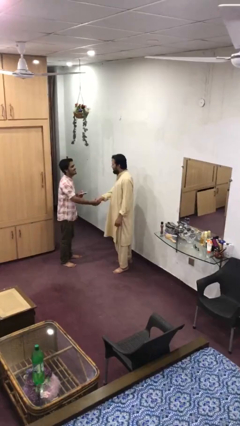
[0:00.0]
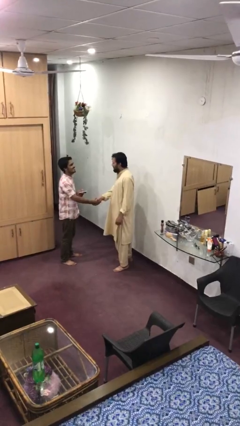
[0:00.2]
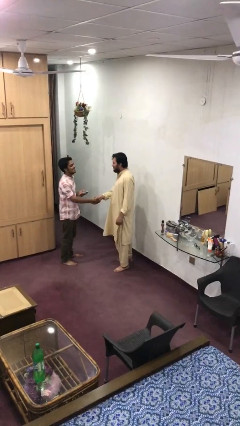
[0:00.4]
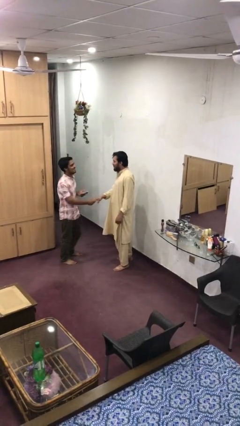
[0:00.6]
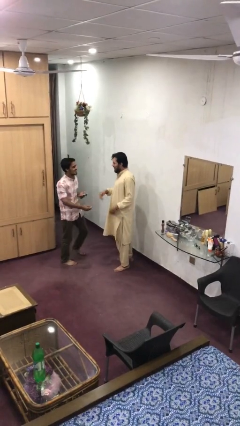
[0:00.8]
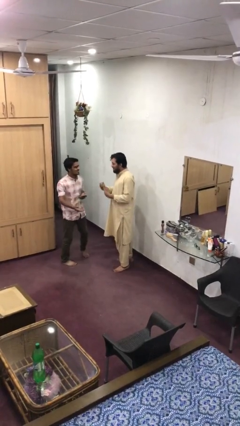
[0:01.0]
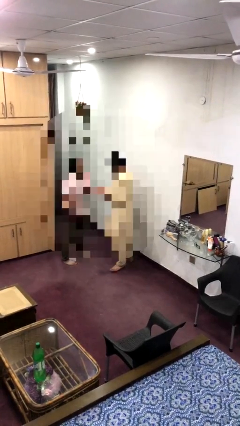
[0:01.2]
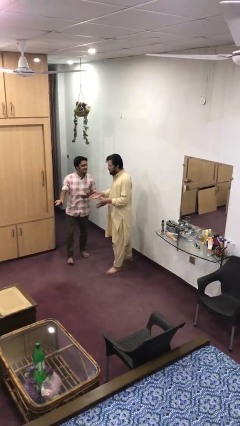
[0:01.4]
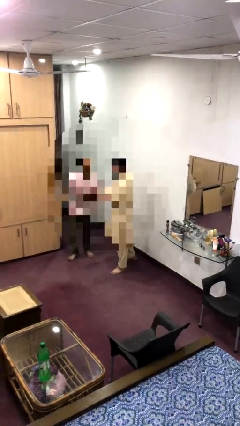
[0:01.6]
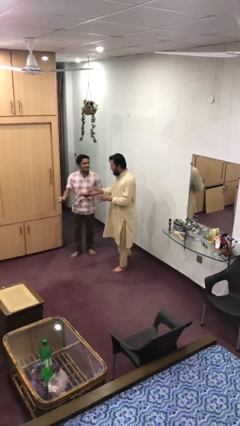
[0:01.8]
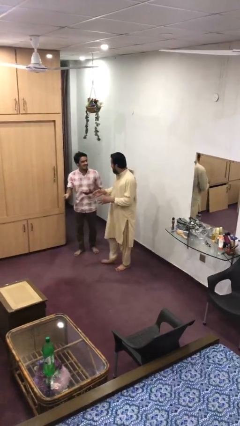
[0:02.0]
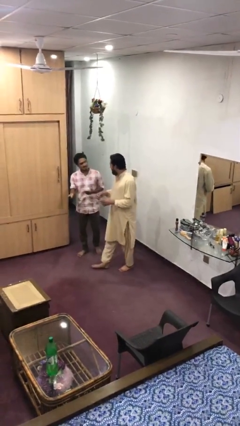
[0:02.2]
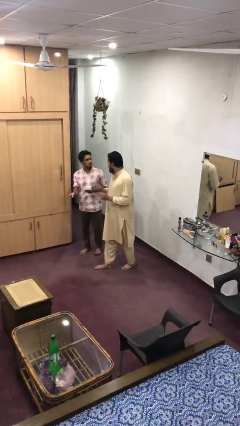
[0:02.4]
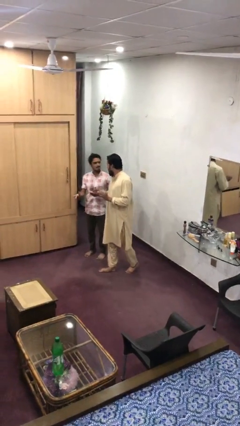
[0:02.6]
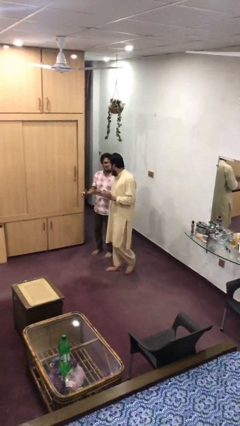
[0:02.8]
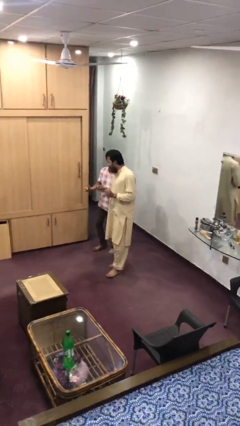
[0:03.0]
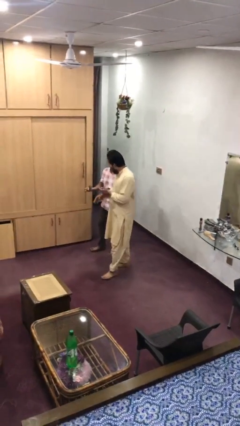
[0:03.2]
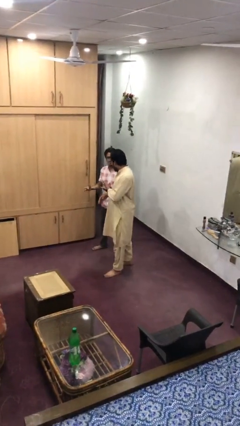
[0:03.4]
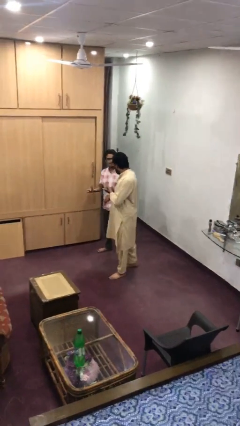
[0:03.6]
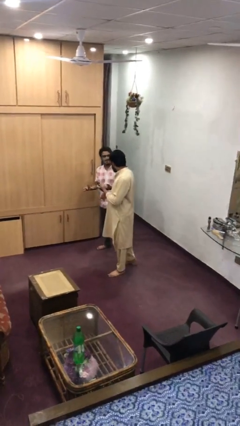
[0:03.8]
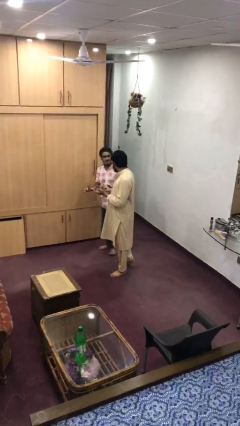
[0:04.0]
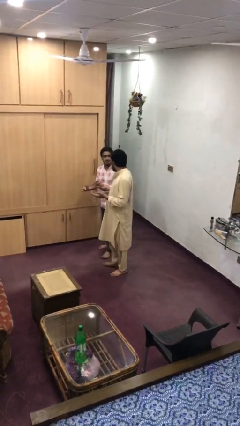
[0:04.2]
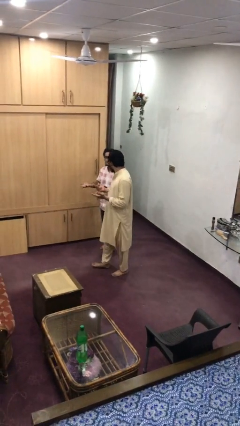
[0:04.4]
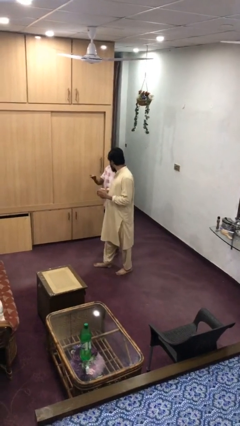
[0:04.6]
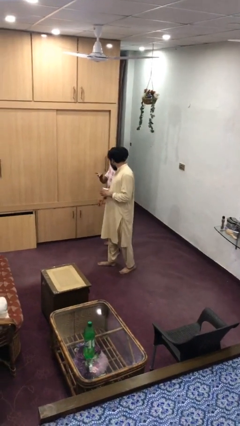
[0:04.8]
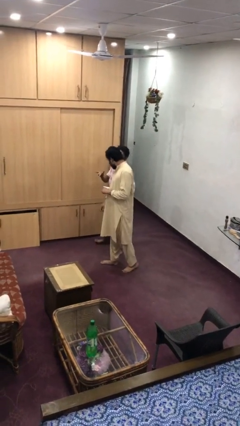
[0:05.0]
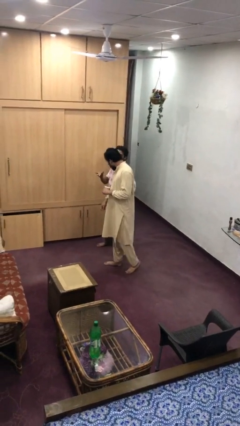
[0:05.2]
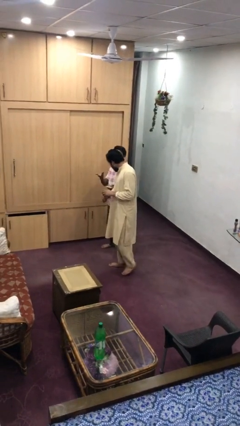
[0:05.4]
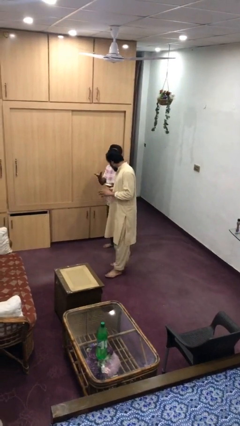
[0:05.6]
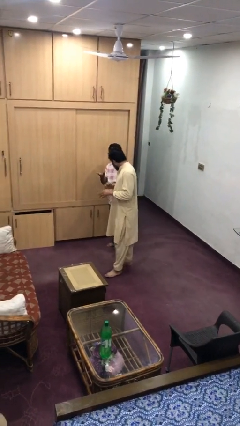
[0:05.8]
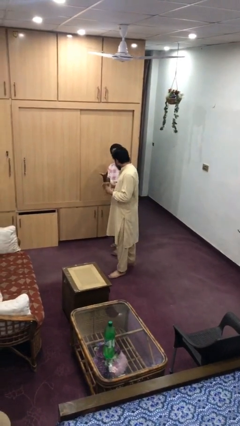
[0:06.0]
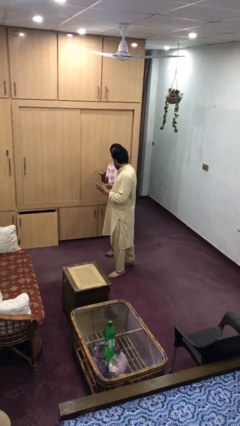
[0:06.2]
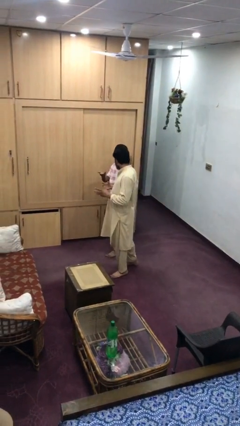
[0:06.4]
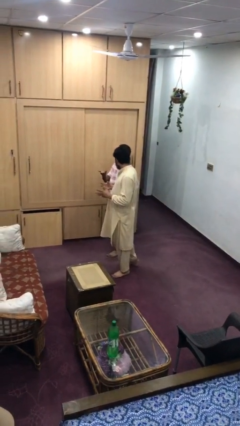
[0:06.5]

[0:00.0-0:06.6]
person talks to person

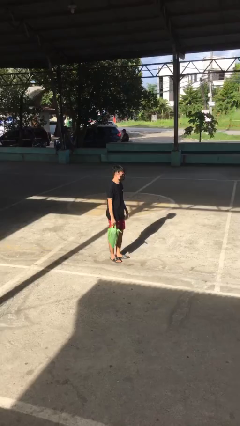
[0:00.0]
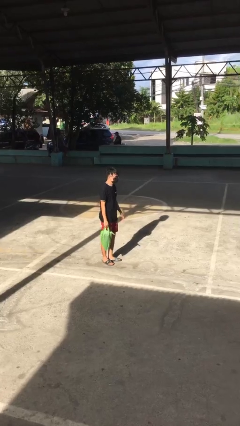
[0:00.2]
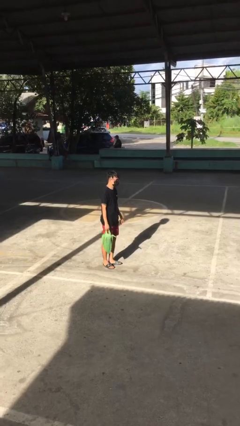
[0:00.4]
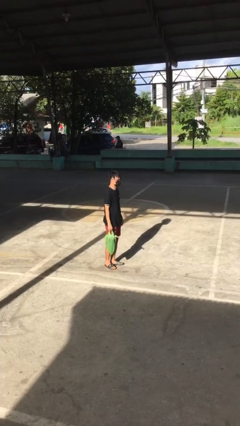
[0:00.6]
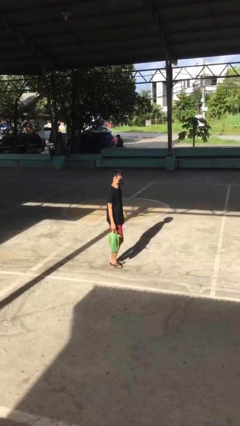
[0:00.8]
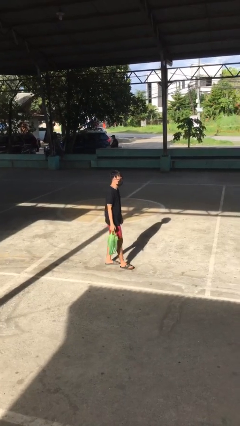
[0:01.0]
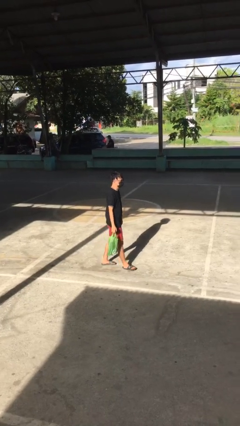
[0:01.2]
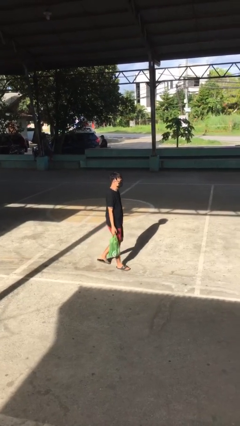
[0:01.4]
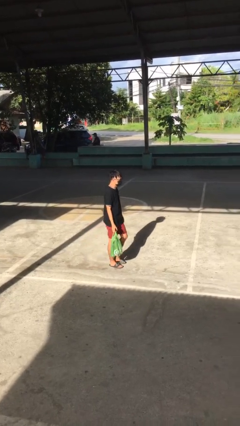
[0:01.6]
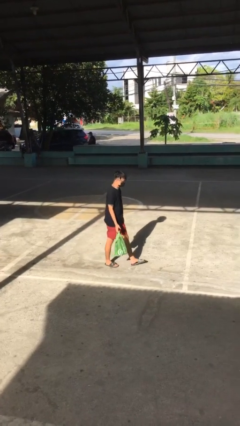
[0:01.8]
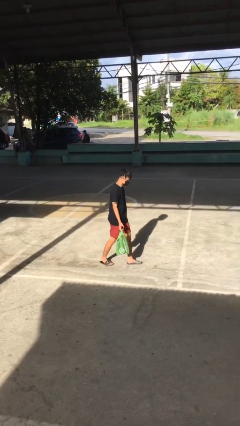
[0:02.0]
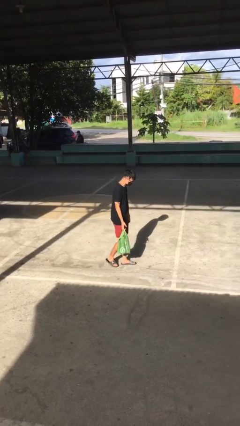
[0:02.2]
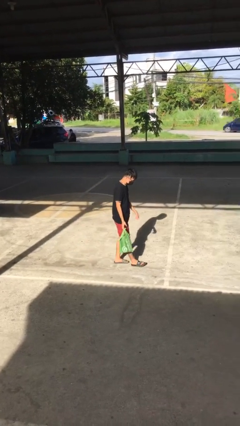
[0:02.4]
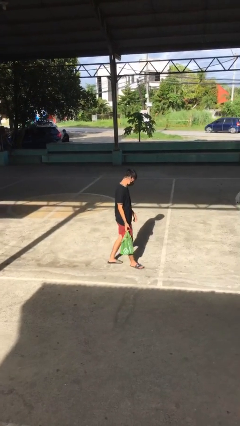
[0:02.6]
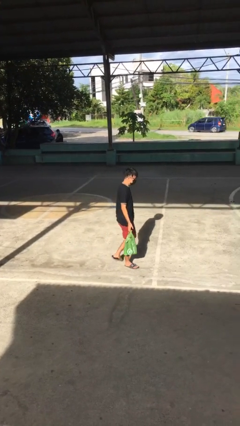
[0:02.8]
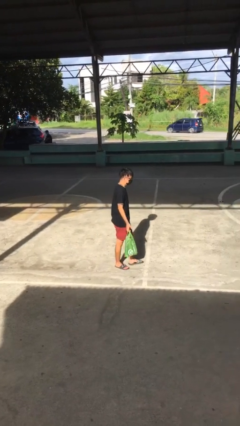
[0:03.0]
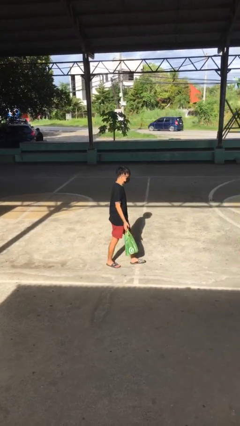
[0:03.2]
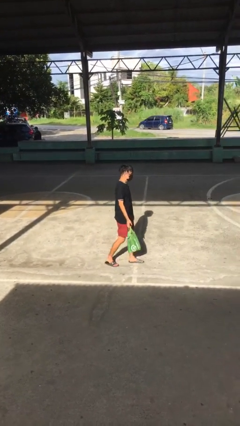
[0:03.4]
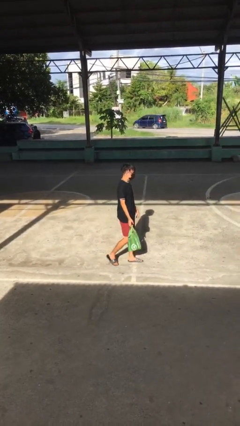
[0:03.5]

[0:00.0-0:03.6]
person carries groceries

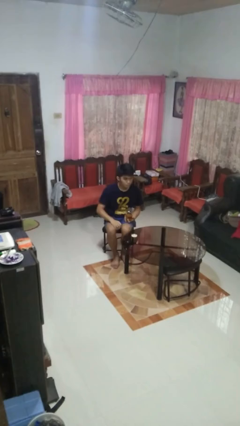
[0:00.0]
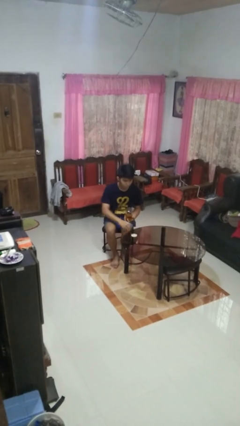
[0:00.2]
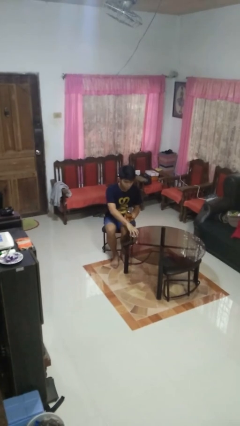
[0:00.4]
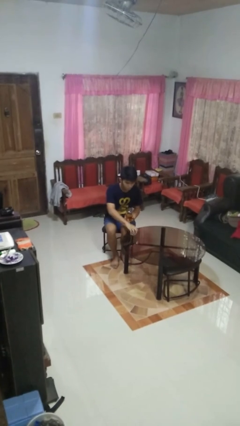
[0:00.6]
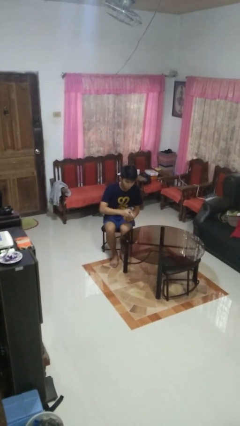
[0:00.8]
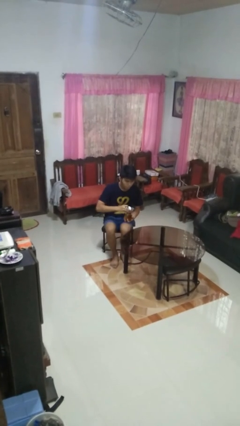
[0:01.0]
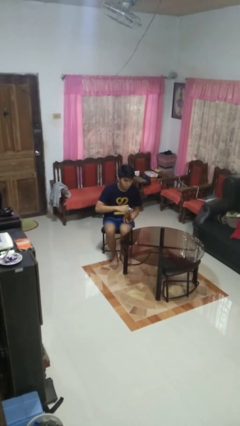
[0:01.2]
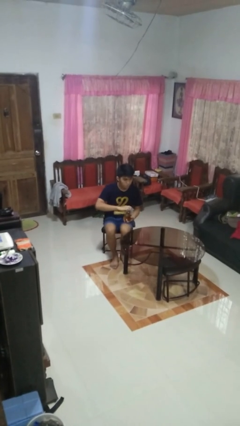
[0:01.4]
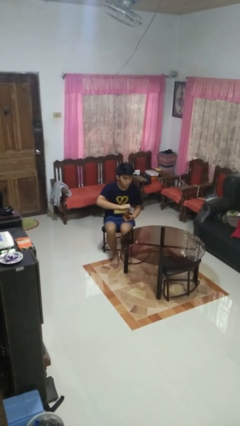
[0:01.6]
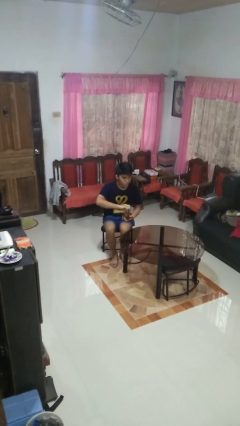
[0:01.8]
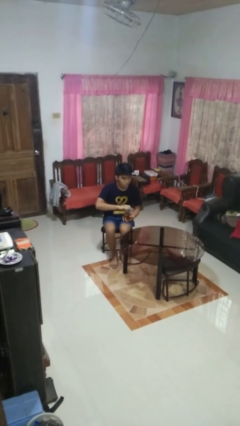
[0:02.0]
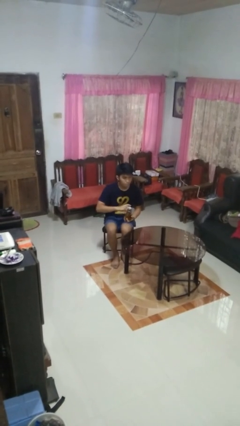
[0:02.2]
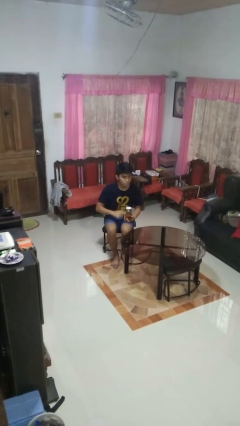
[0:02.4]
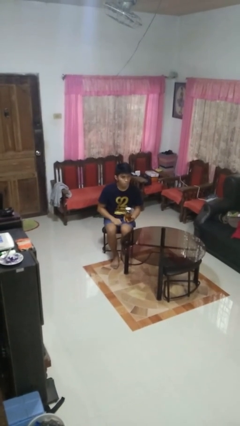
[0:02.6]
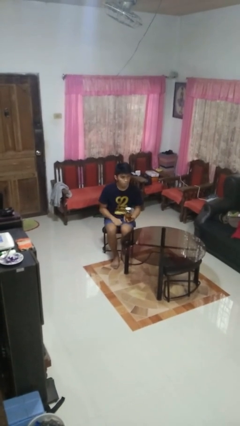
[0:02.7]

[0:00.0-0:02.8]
person closes jar

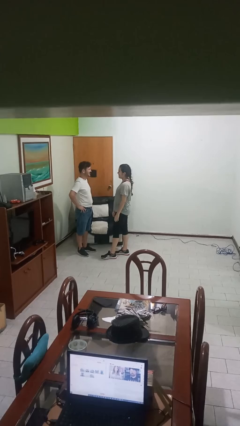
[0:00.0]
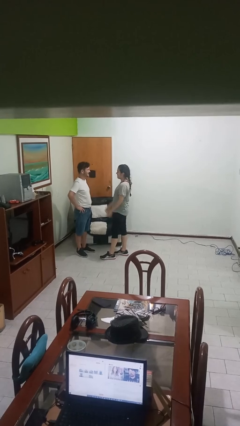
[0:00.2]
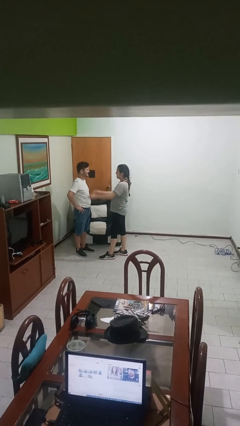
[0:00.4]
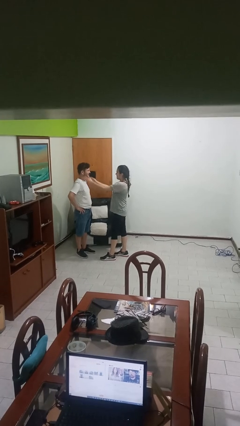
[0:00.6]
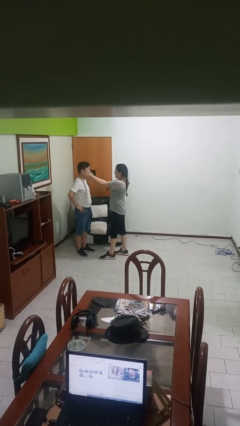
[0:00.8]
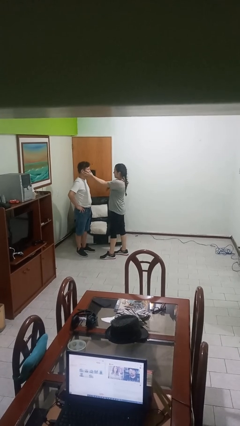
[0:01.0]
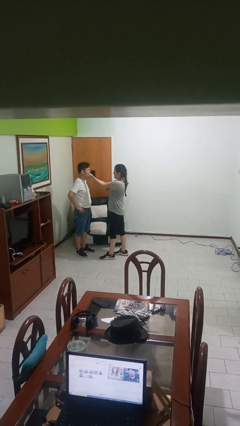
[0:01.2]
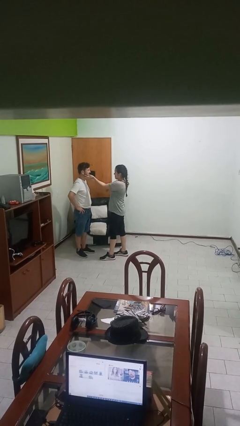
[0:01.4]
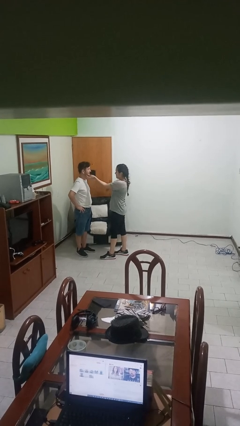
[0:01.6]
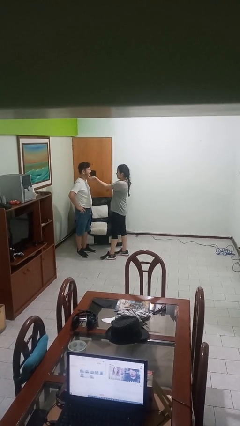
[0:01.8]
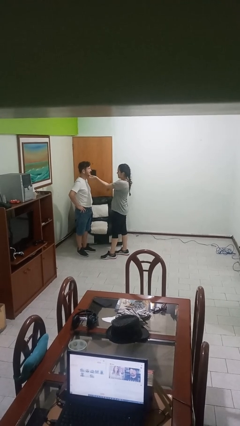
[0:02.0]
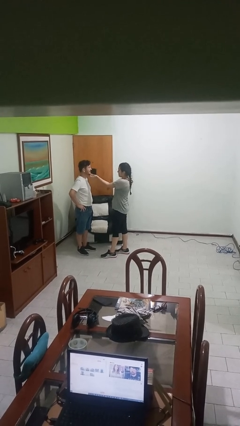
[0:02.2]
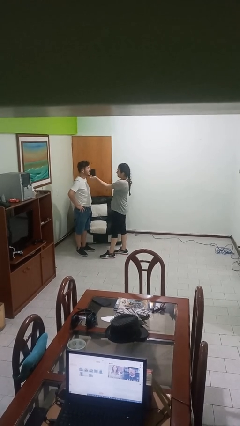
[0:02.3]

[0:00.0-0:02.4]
person touches face of person

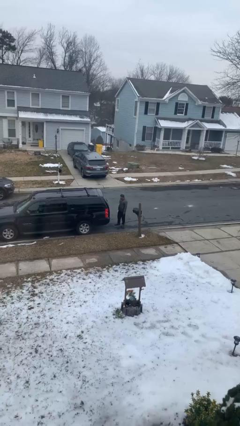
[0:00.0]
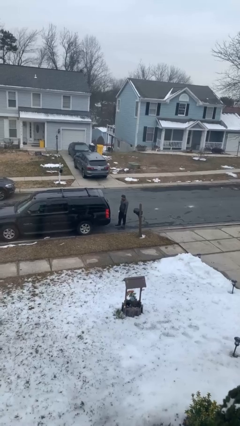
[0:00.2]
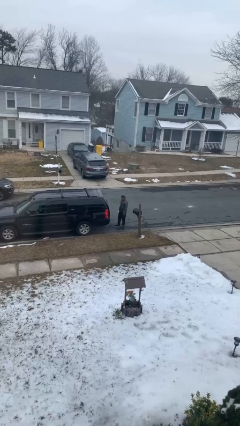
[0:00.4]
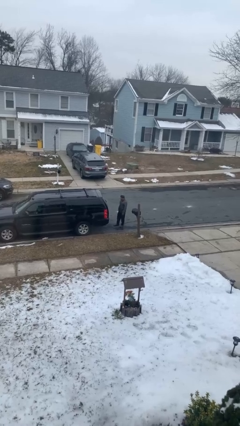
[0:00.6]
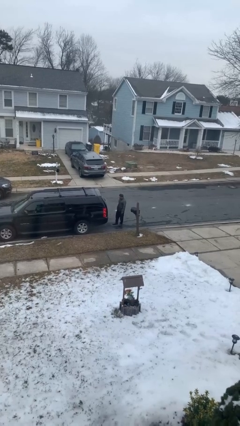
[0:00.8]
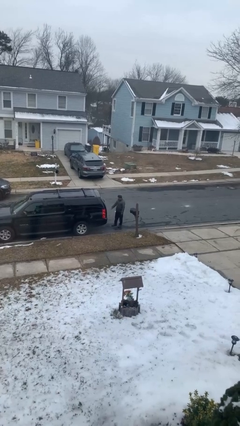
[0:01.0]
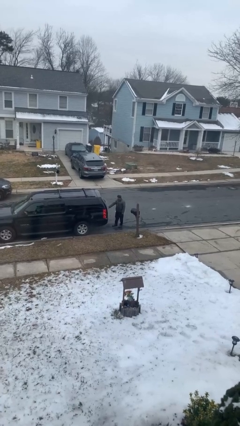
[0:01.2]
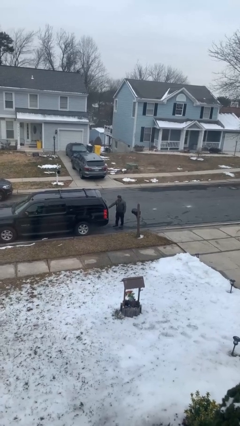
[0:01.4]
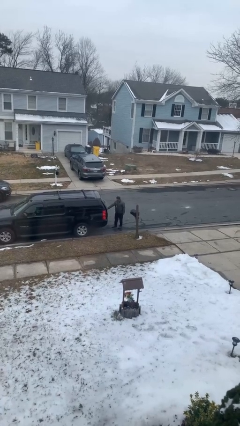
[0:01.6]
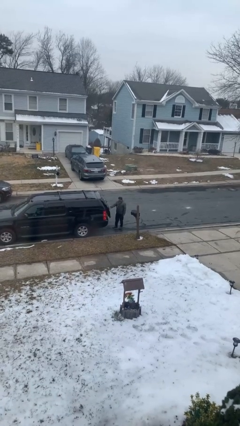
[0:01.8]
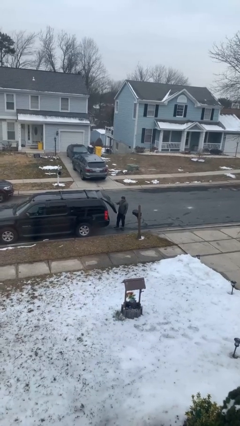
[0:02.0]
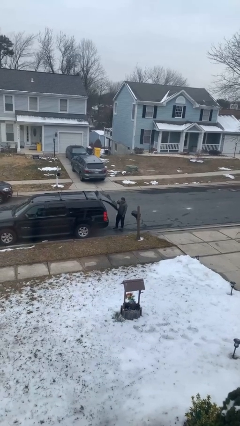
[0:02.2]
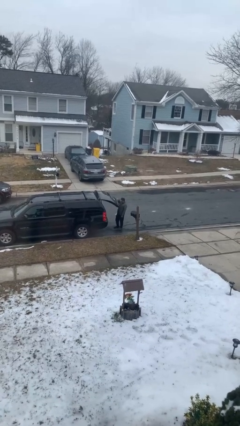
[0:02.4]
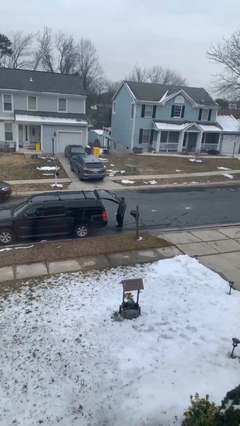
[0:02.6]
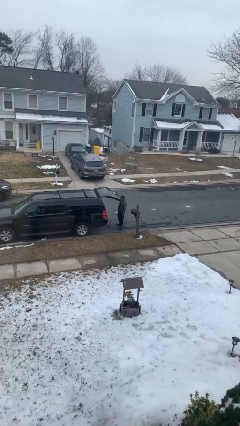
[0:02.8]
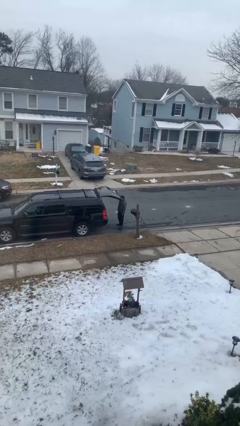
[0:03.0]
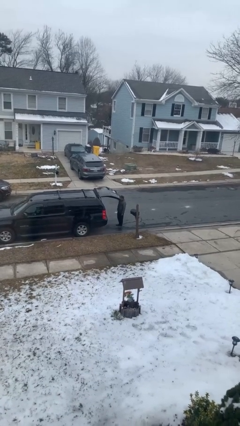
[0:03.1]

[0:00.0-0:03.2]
person opens car trunk
